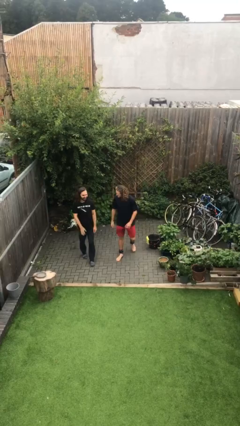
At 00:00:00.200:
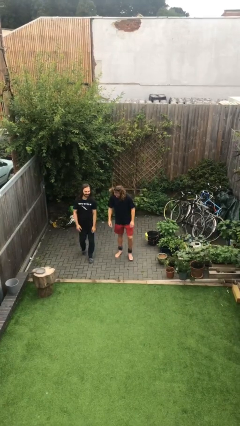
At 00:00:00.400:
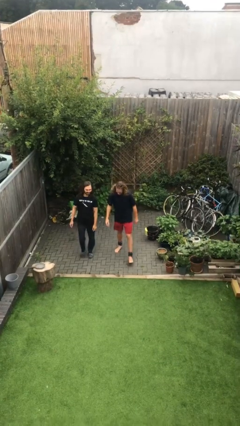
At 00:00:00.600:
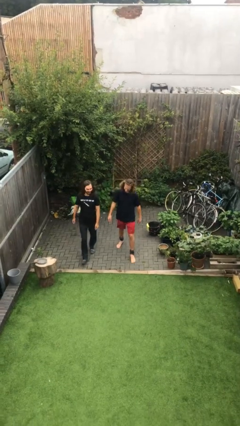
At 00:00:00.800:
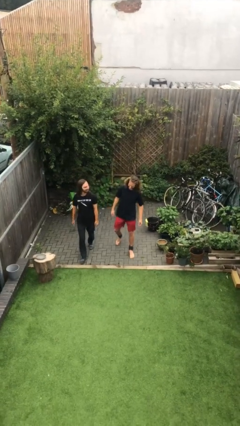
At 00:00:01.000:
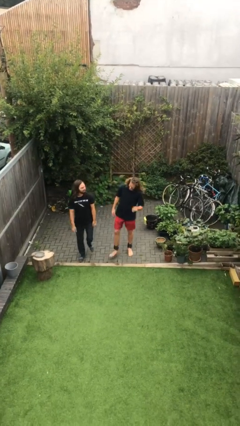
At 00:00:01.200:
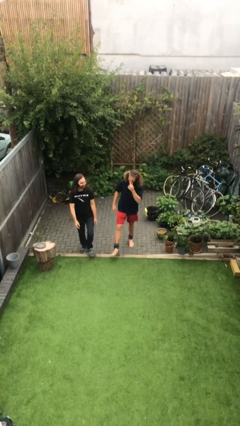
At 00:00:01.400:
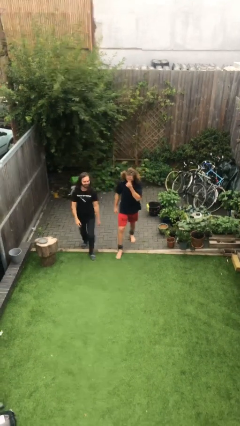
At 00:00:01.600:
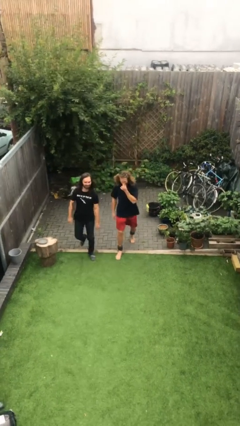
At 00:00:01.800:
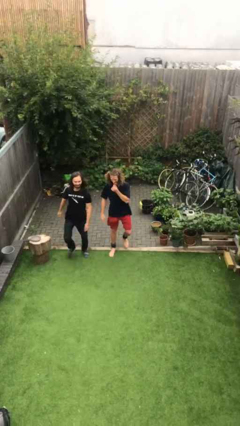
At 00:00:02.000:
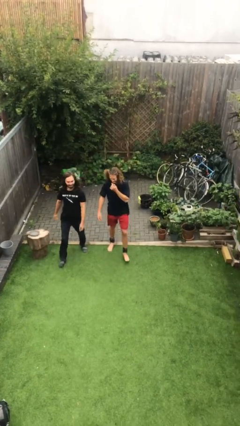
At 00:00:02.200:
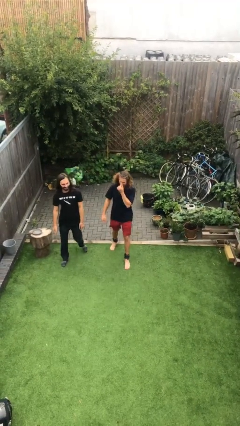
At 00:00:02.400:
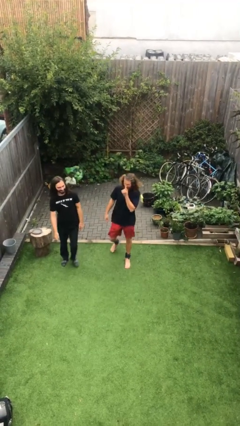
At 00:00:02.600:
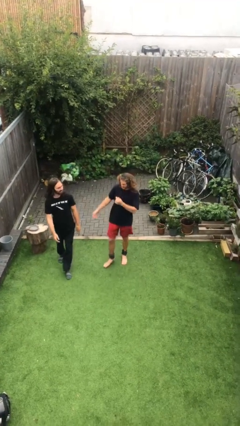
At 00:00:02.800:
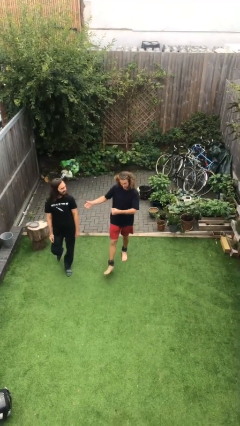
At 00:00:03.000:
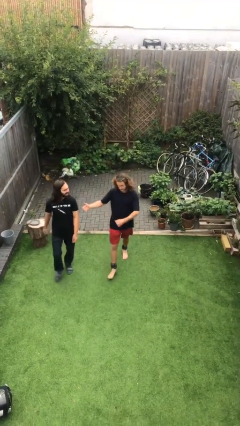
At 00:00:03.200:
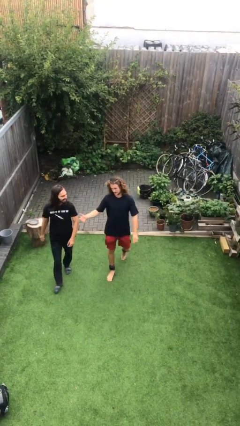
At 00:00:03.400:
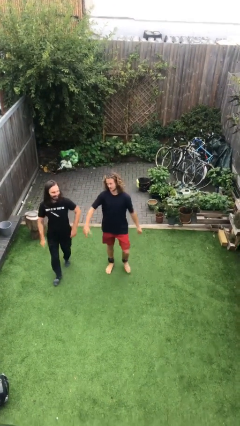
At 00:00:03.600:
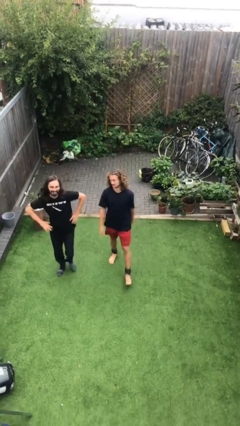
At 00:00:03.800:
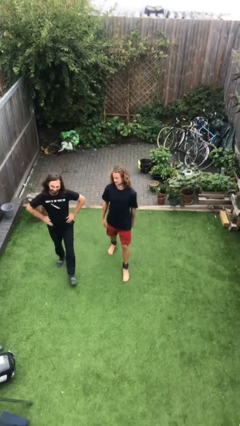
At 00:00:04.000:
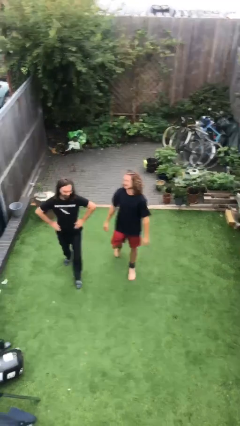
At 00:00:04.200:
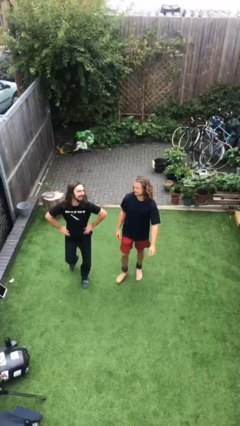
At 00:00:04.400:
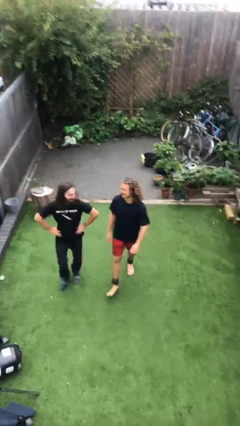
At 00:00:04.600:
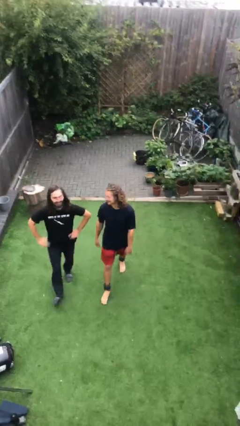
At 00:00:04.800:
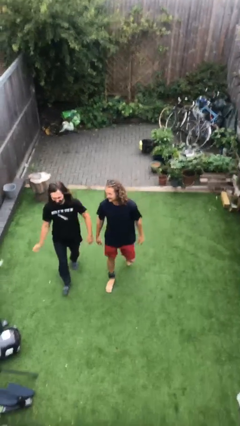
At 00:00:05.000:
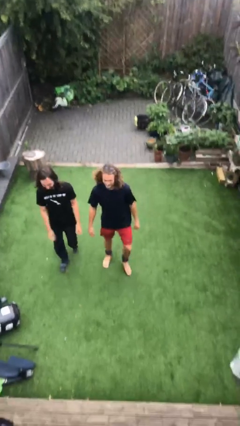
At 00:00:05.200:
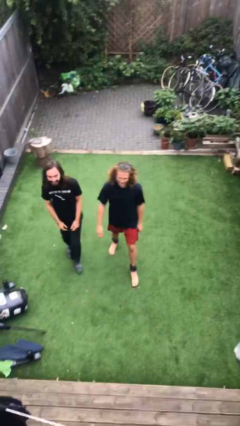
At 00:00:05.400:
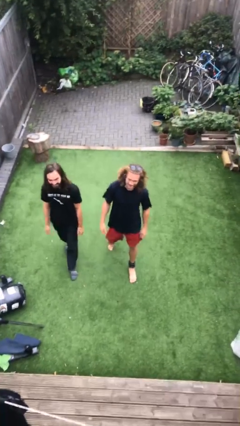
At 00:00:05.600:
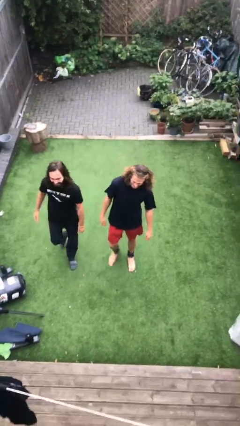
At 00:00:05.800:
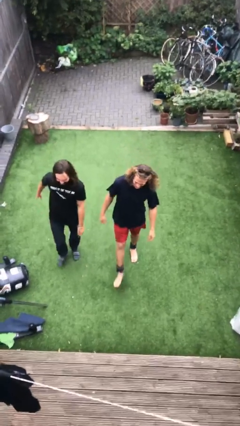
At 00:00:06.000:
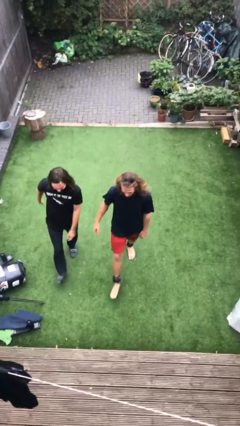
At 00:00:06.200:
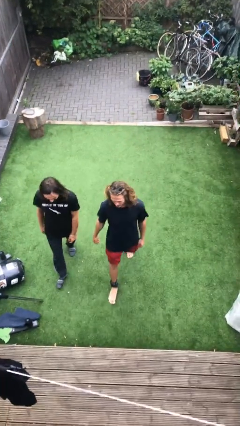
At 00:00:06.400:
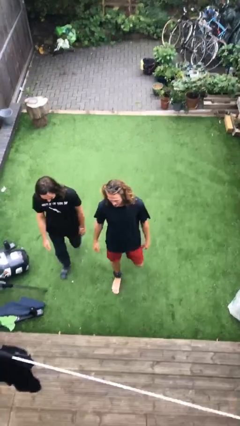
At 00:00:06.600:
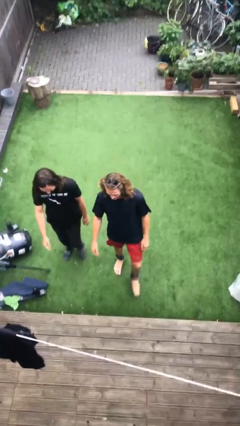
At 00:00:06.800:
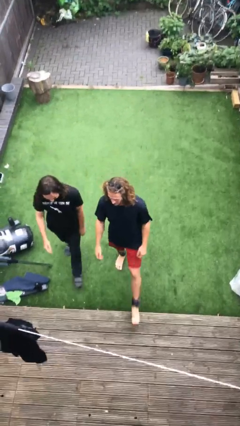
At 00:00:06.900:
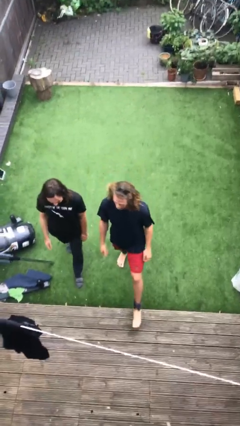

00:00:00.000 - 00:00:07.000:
person talks to person

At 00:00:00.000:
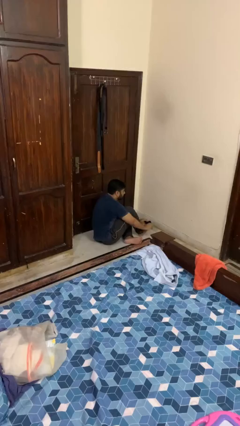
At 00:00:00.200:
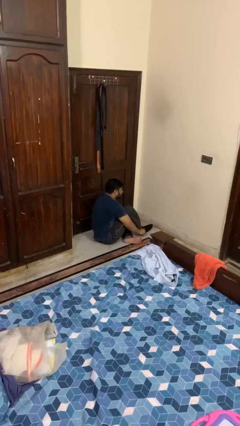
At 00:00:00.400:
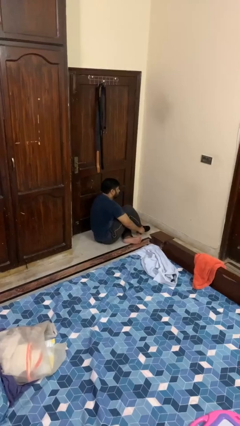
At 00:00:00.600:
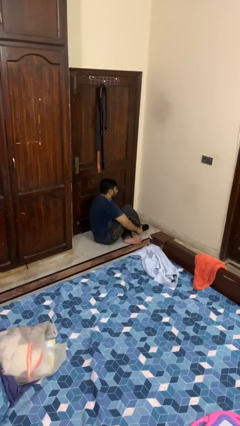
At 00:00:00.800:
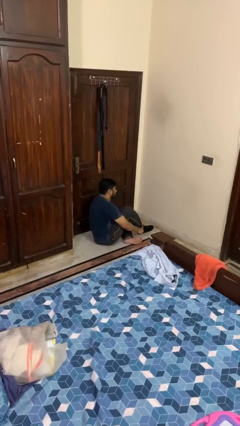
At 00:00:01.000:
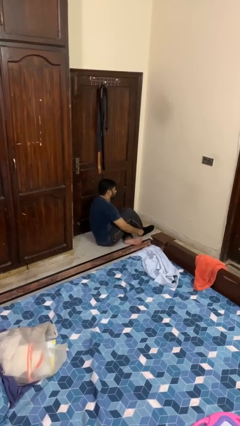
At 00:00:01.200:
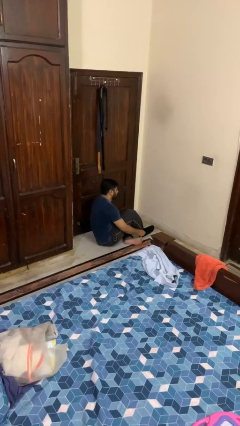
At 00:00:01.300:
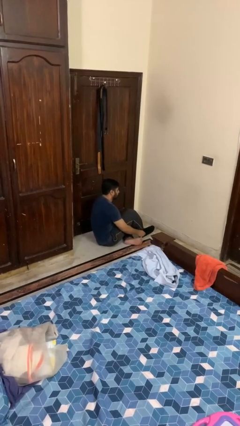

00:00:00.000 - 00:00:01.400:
person puts on socks

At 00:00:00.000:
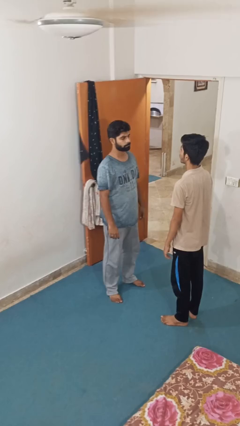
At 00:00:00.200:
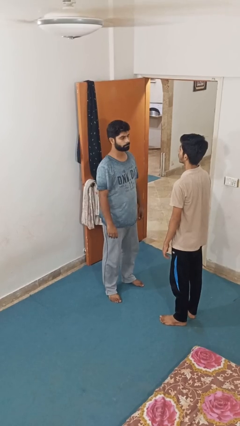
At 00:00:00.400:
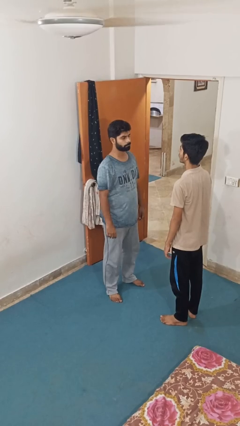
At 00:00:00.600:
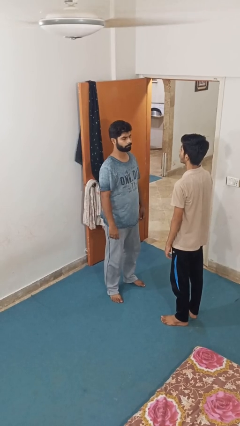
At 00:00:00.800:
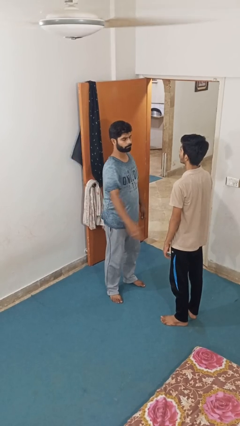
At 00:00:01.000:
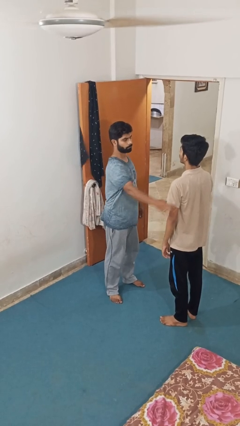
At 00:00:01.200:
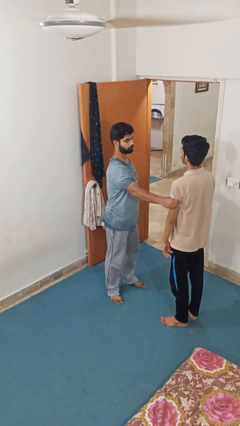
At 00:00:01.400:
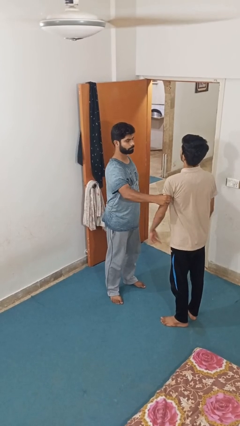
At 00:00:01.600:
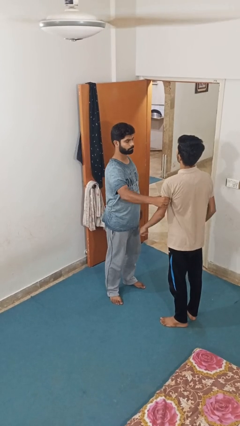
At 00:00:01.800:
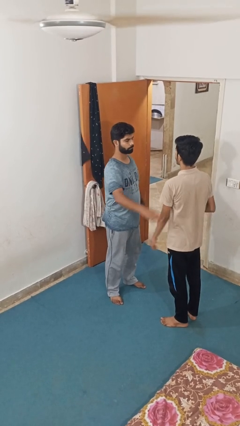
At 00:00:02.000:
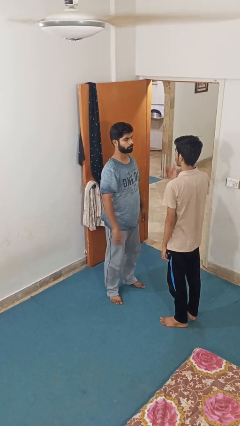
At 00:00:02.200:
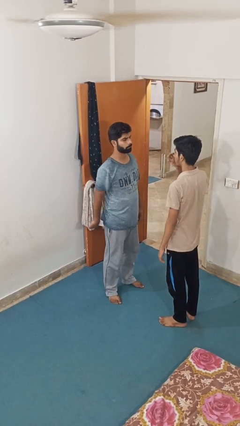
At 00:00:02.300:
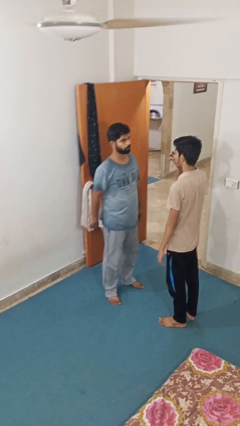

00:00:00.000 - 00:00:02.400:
person grabs person by bicep

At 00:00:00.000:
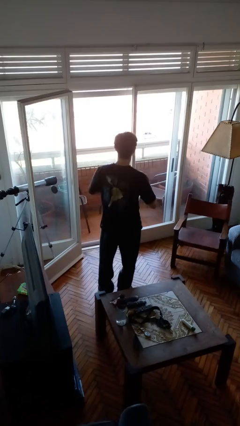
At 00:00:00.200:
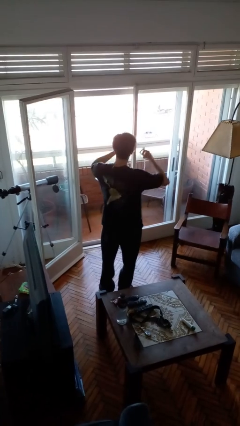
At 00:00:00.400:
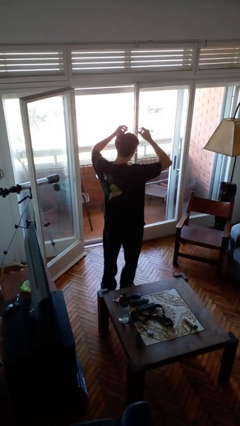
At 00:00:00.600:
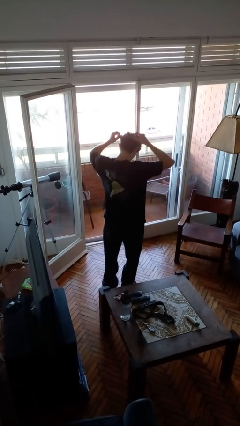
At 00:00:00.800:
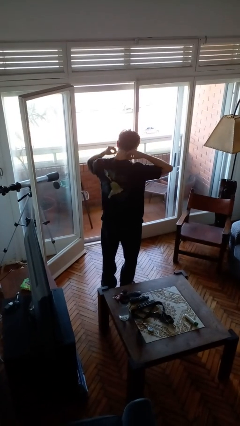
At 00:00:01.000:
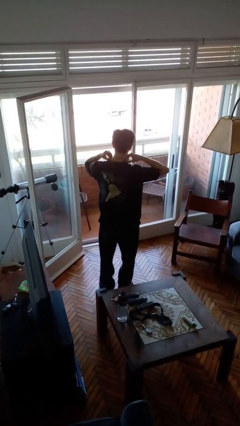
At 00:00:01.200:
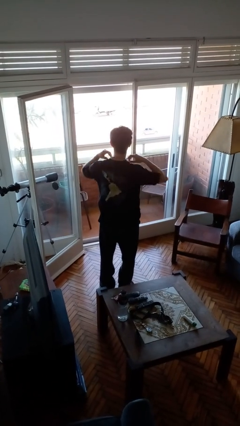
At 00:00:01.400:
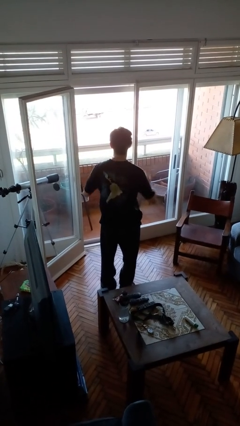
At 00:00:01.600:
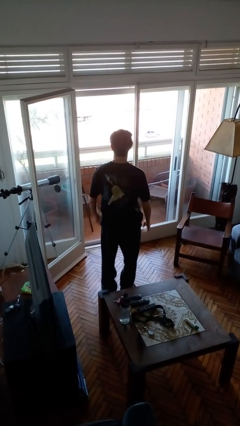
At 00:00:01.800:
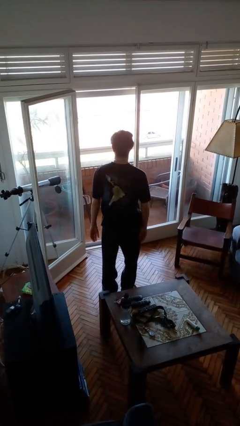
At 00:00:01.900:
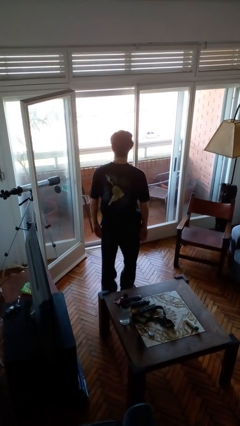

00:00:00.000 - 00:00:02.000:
person puts on necklace

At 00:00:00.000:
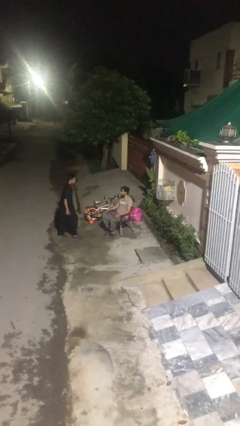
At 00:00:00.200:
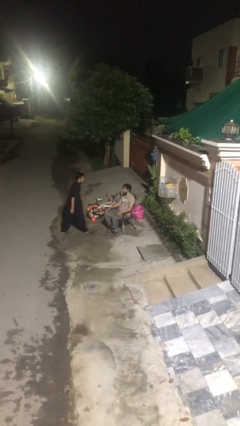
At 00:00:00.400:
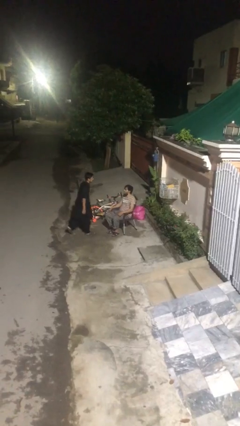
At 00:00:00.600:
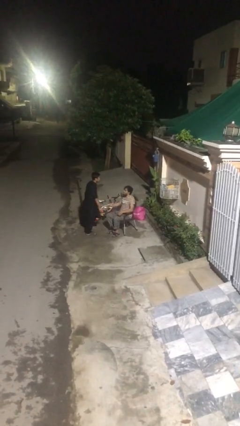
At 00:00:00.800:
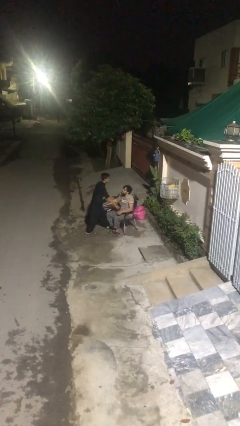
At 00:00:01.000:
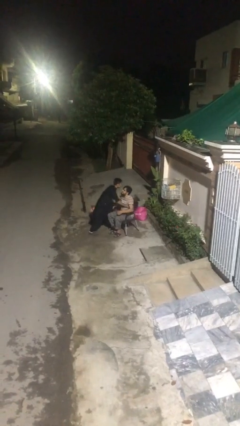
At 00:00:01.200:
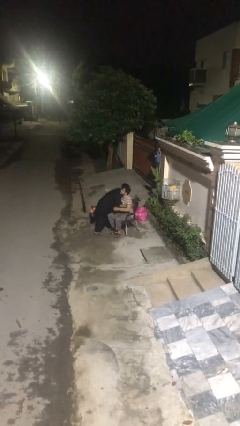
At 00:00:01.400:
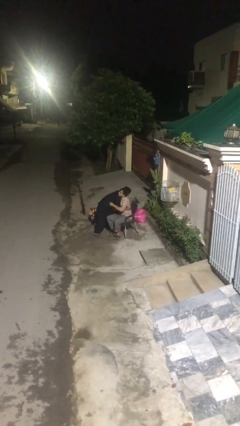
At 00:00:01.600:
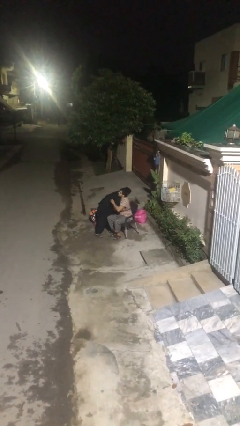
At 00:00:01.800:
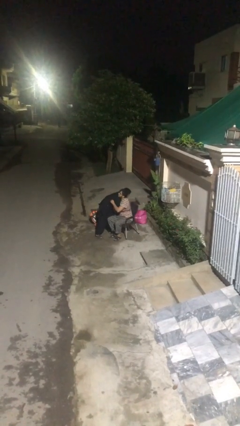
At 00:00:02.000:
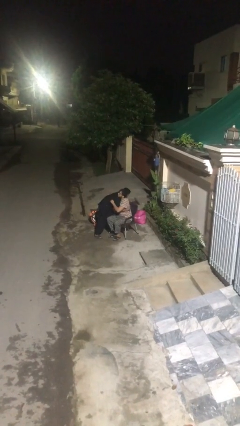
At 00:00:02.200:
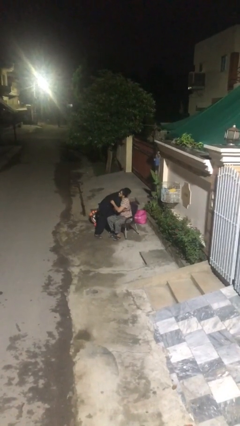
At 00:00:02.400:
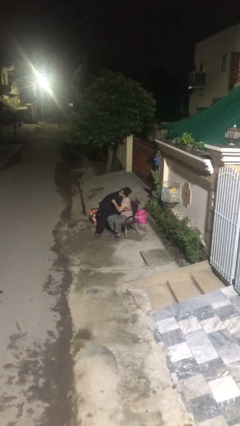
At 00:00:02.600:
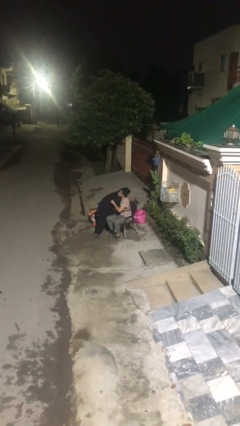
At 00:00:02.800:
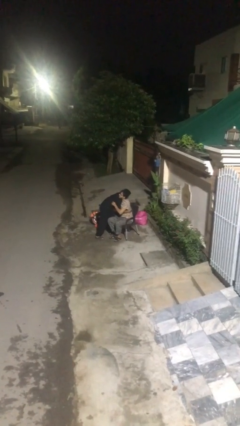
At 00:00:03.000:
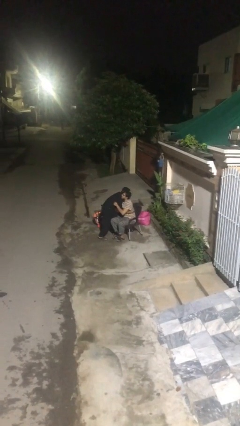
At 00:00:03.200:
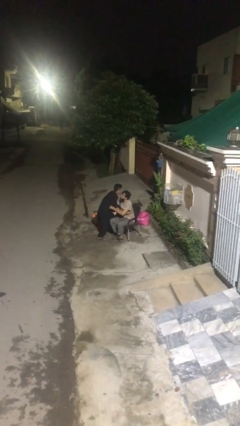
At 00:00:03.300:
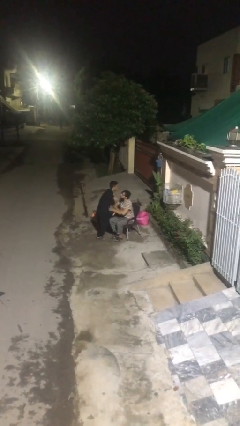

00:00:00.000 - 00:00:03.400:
person embraces person

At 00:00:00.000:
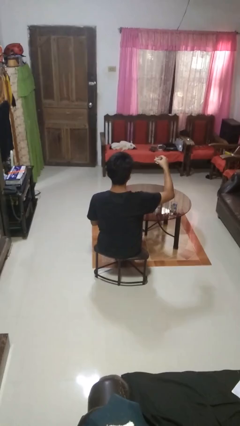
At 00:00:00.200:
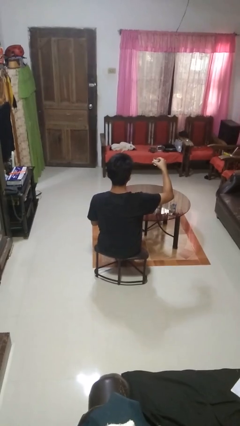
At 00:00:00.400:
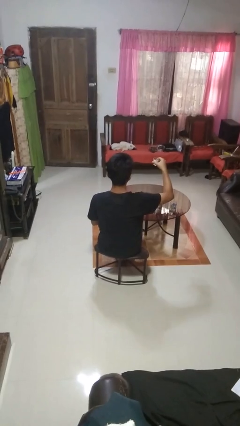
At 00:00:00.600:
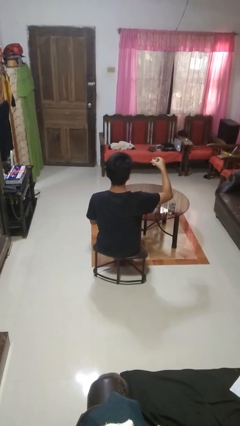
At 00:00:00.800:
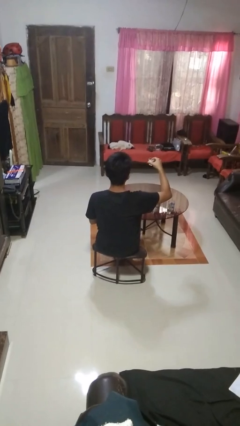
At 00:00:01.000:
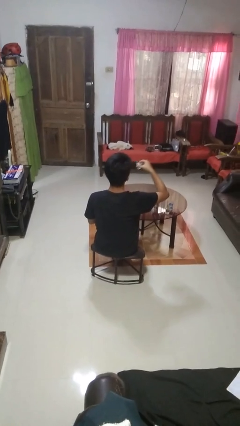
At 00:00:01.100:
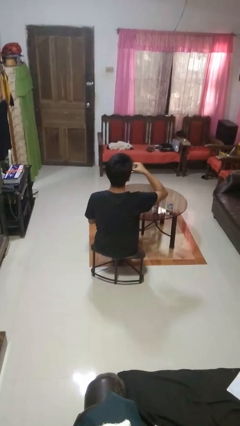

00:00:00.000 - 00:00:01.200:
person picks up object from table
